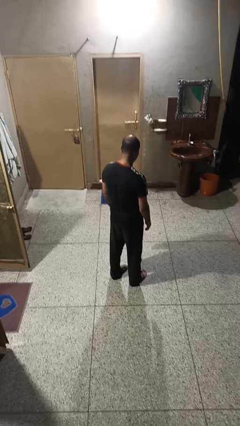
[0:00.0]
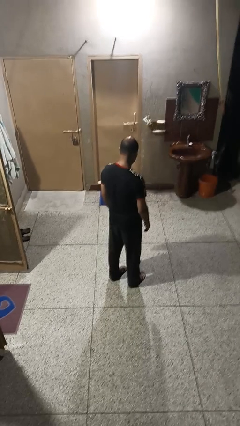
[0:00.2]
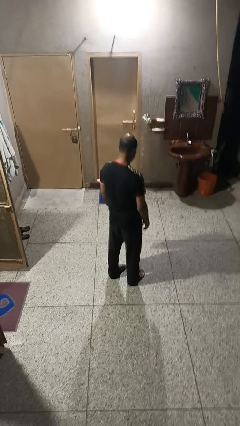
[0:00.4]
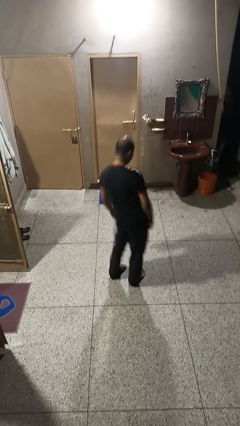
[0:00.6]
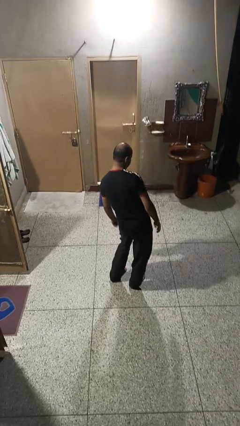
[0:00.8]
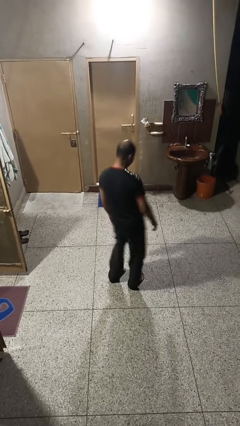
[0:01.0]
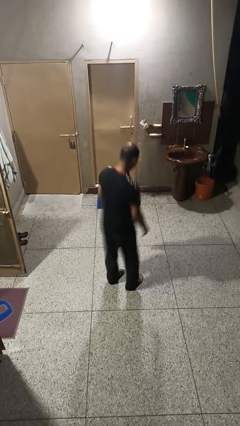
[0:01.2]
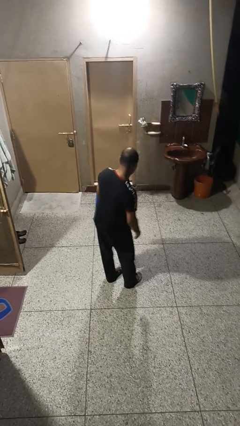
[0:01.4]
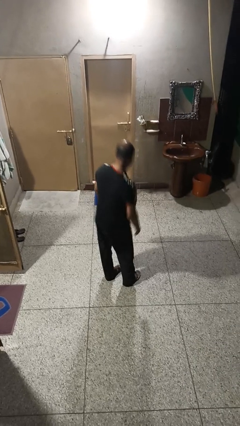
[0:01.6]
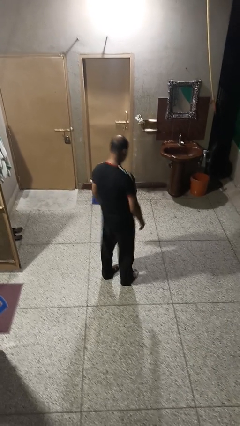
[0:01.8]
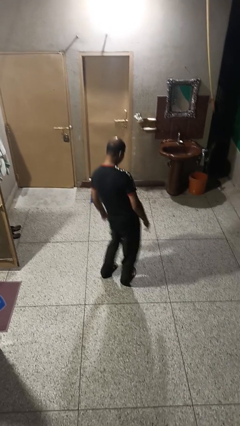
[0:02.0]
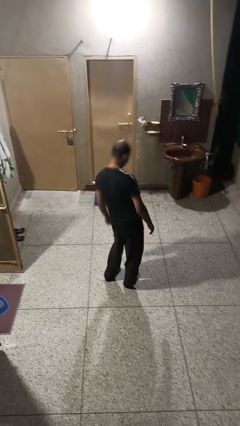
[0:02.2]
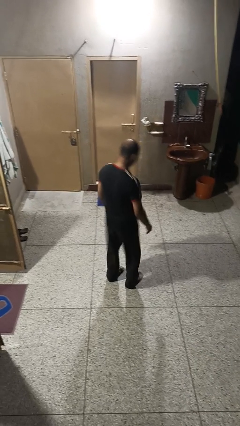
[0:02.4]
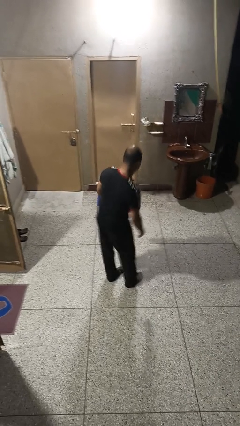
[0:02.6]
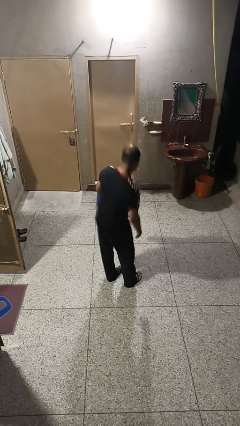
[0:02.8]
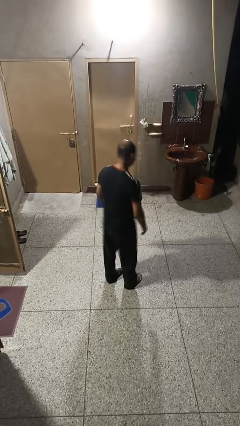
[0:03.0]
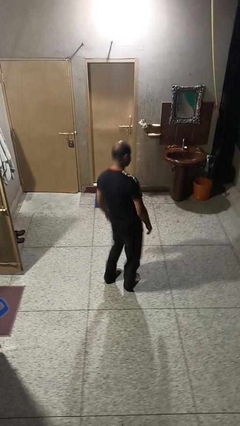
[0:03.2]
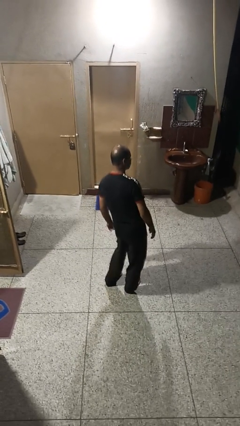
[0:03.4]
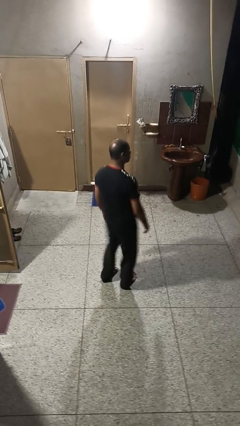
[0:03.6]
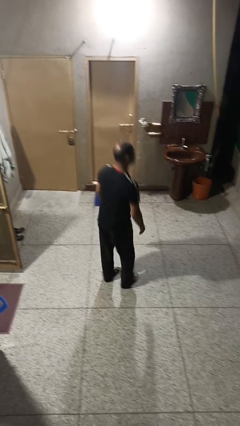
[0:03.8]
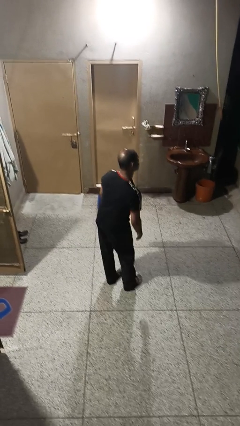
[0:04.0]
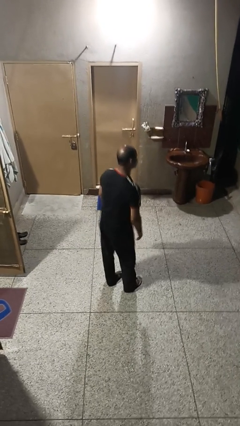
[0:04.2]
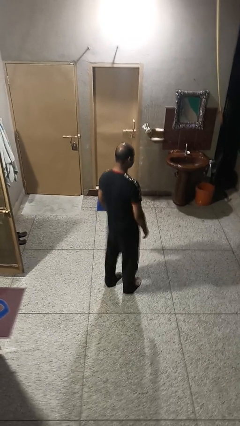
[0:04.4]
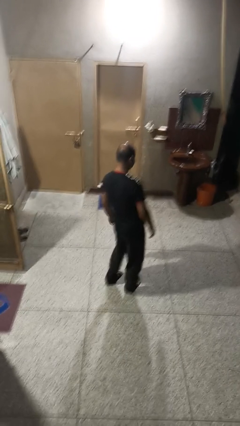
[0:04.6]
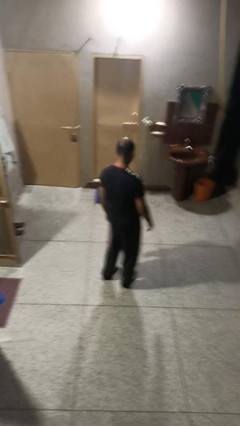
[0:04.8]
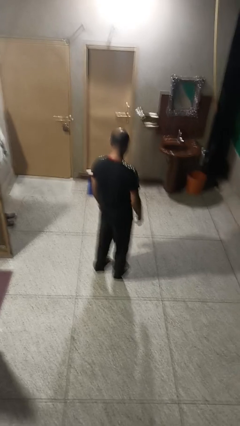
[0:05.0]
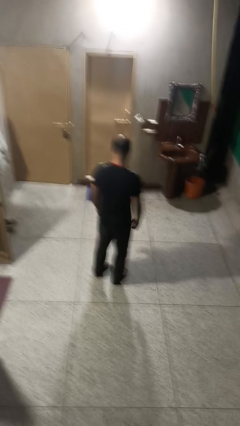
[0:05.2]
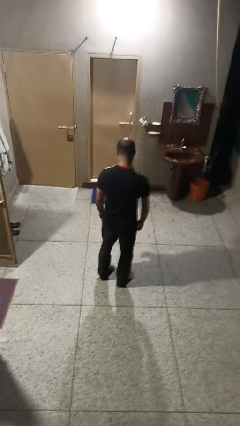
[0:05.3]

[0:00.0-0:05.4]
person wiggles hips

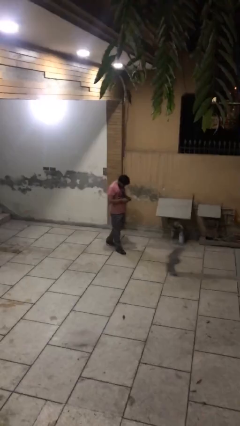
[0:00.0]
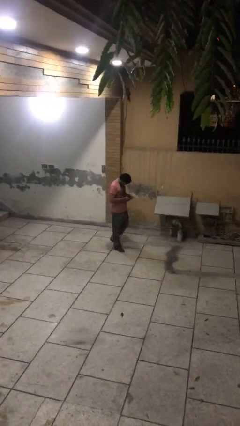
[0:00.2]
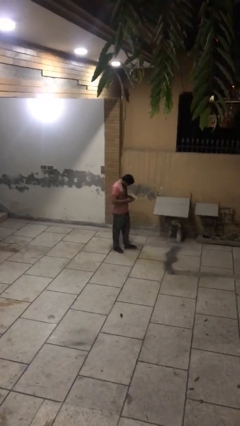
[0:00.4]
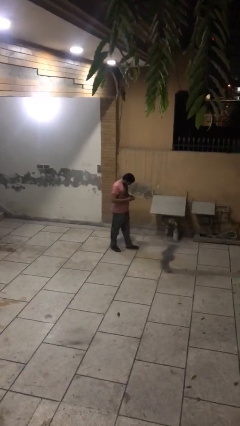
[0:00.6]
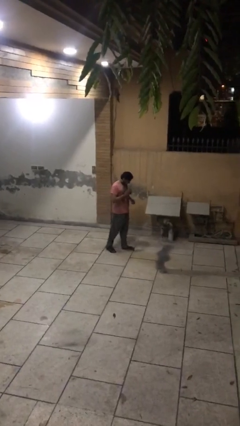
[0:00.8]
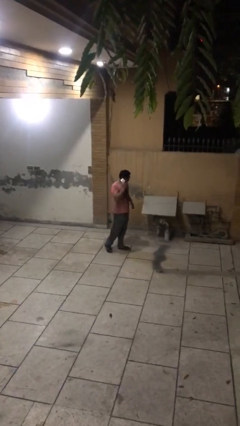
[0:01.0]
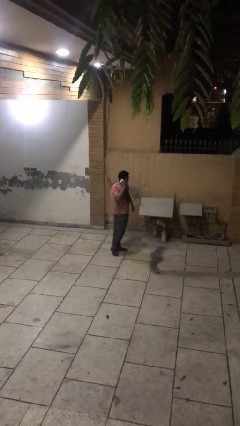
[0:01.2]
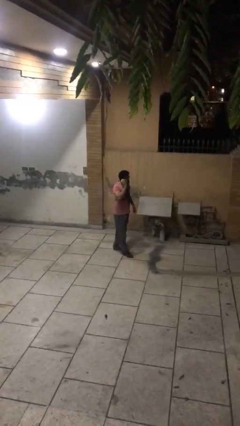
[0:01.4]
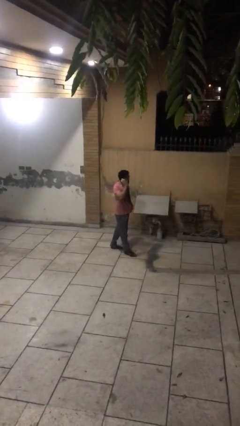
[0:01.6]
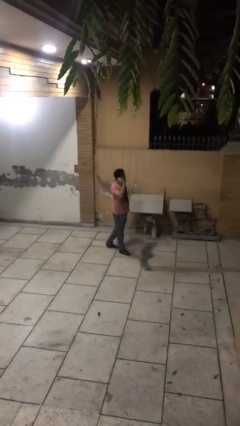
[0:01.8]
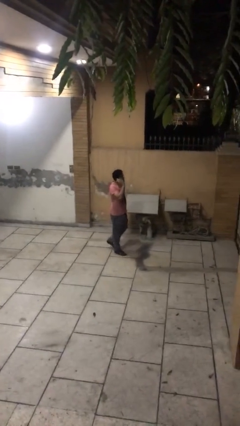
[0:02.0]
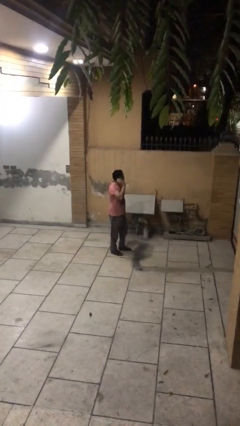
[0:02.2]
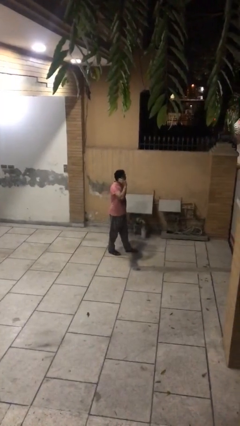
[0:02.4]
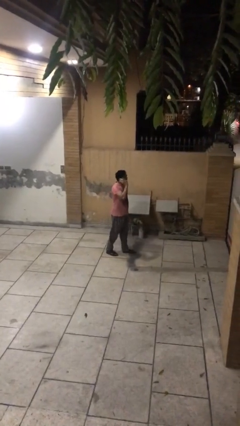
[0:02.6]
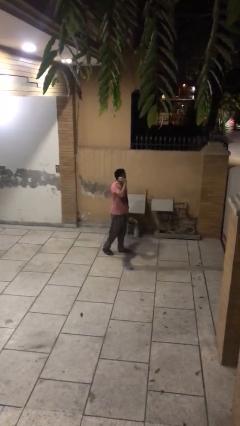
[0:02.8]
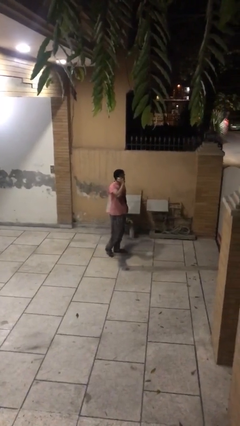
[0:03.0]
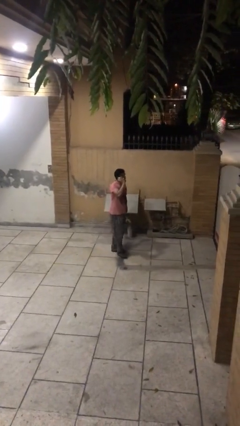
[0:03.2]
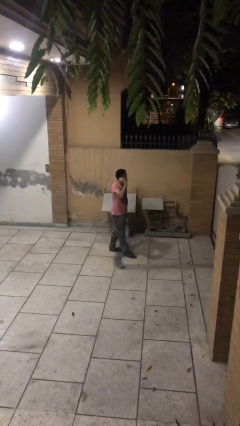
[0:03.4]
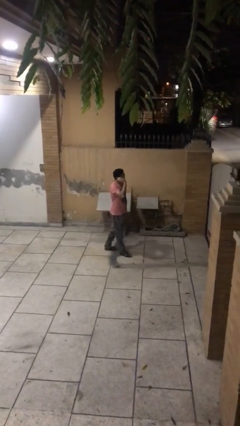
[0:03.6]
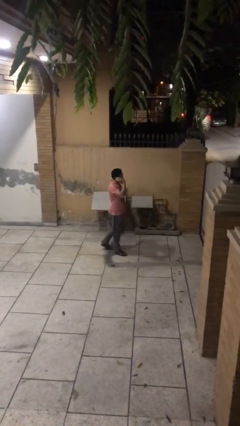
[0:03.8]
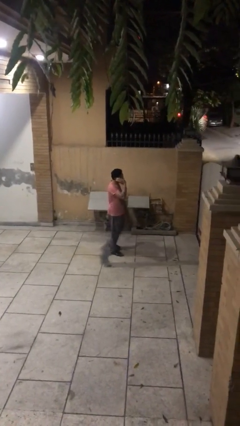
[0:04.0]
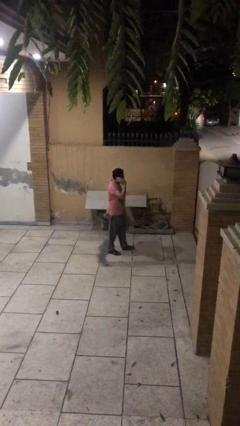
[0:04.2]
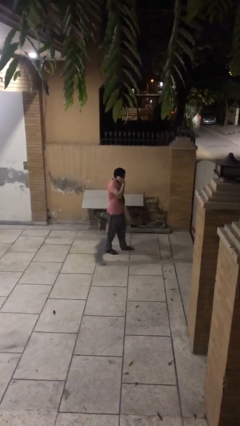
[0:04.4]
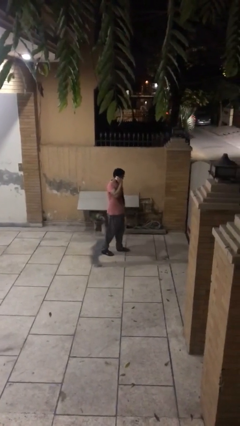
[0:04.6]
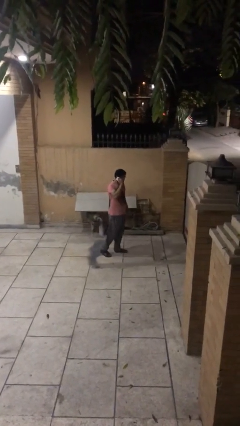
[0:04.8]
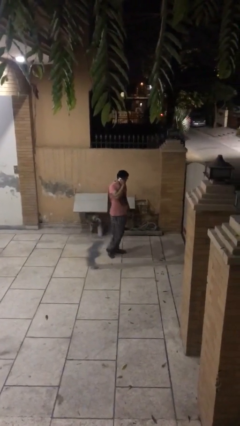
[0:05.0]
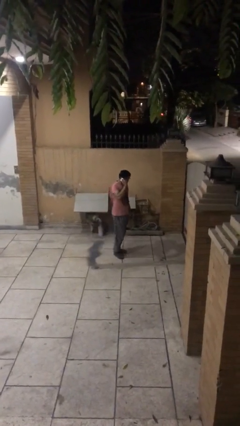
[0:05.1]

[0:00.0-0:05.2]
person talks on phone

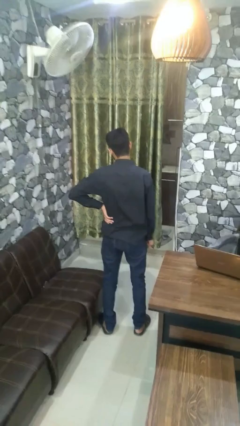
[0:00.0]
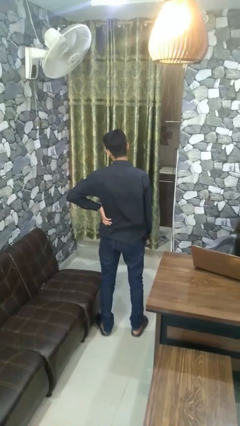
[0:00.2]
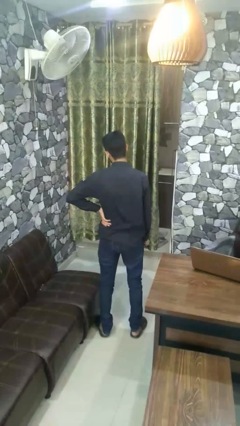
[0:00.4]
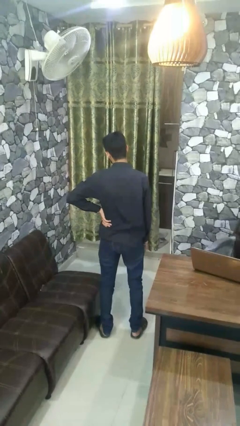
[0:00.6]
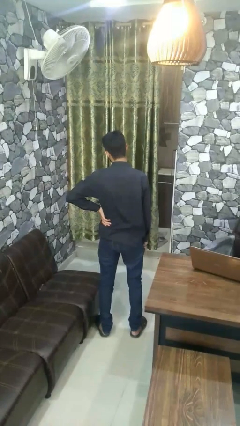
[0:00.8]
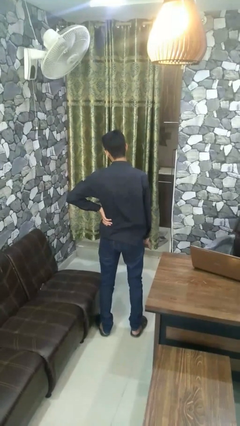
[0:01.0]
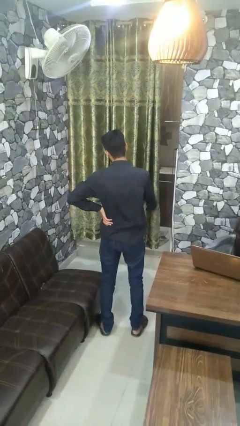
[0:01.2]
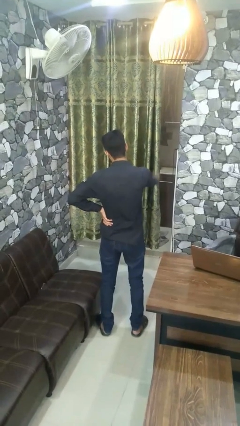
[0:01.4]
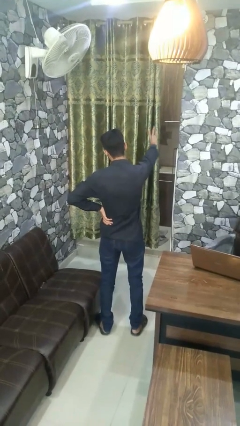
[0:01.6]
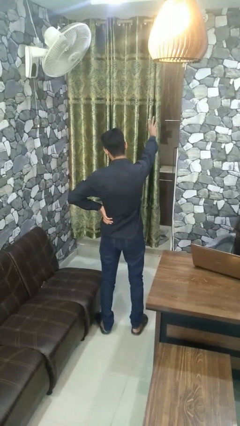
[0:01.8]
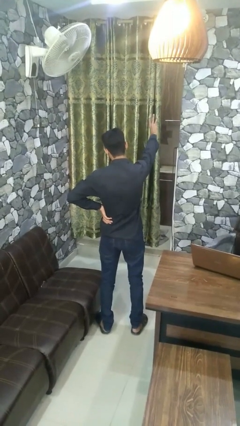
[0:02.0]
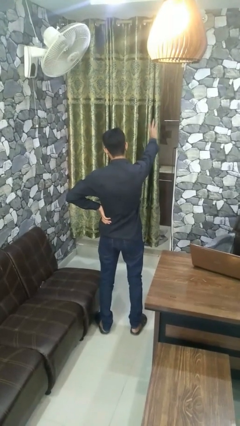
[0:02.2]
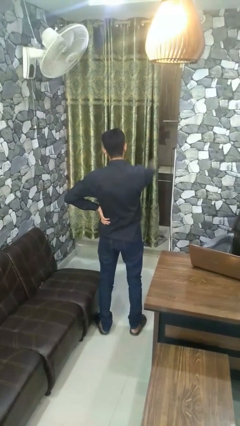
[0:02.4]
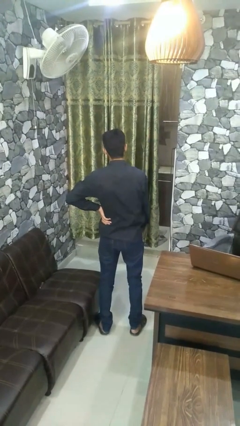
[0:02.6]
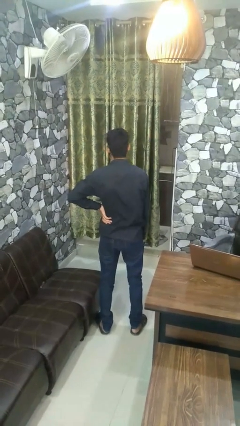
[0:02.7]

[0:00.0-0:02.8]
person gestures number three

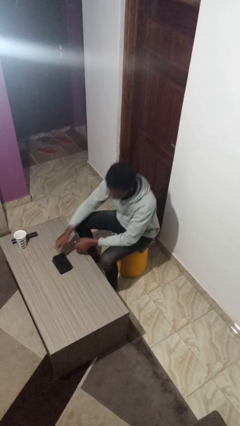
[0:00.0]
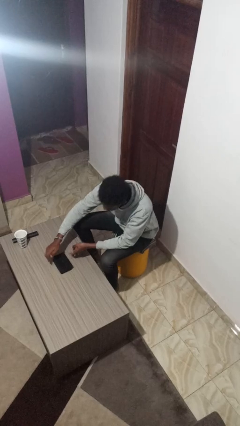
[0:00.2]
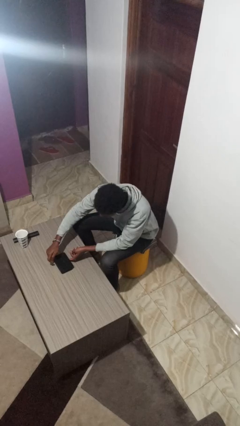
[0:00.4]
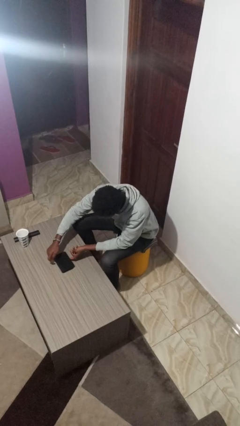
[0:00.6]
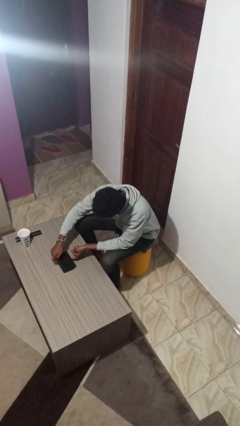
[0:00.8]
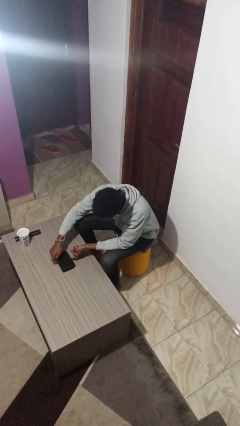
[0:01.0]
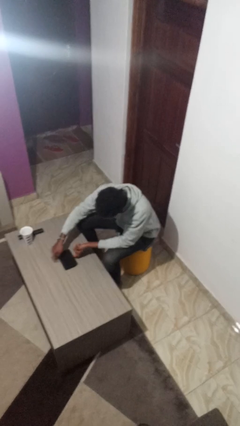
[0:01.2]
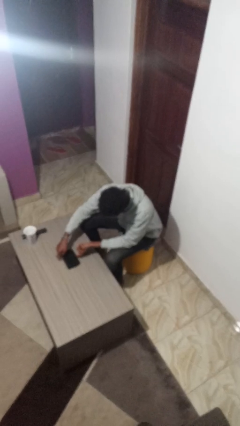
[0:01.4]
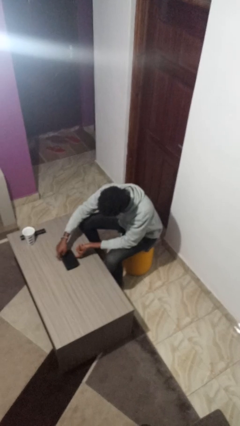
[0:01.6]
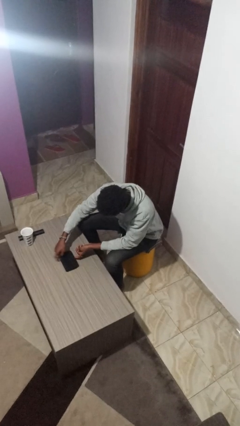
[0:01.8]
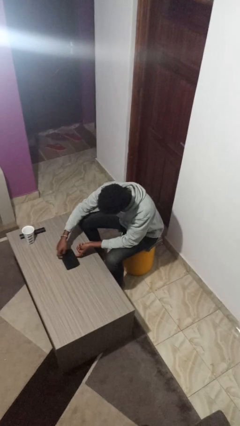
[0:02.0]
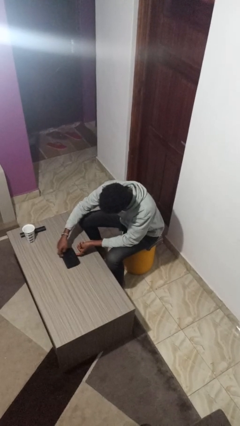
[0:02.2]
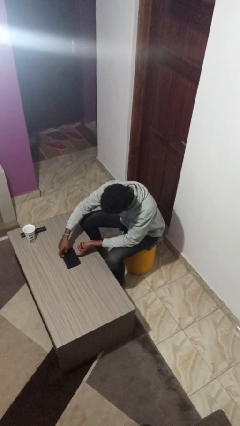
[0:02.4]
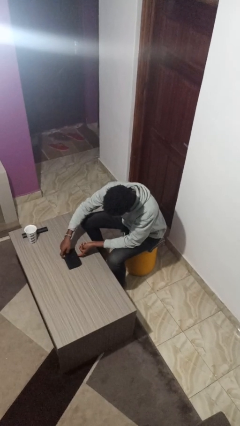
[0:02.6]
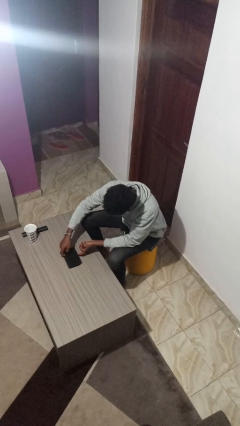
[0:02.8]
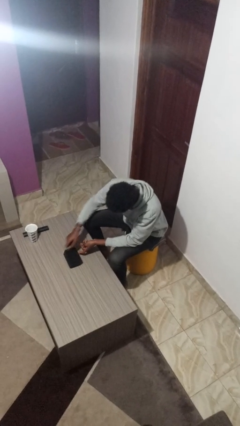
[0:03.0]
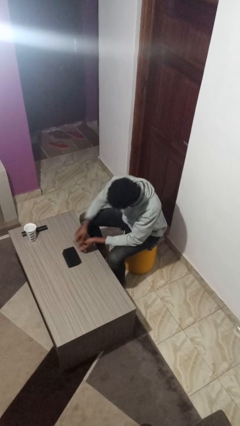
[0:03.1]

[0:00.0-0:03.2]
person taps object with finger

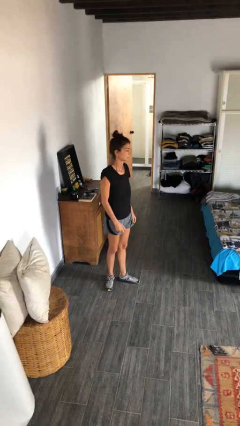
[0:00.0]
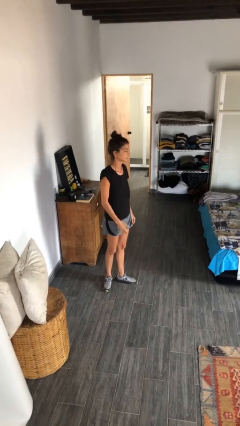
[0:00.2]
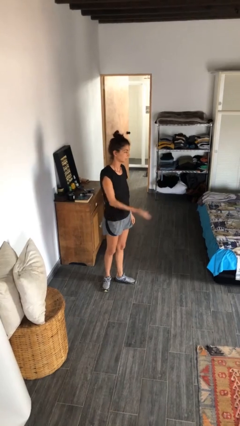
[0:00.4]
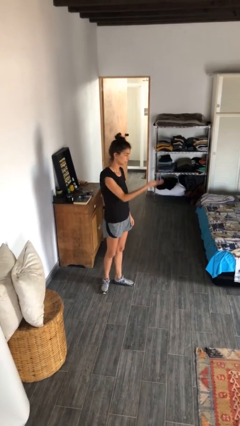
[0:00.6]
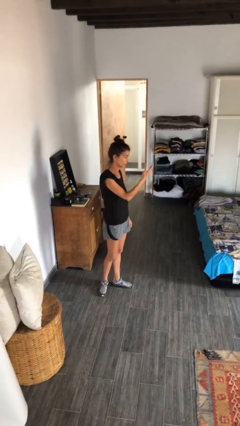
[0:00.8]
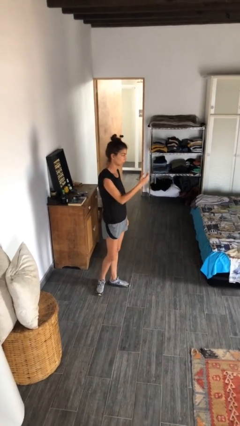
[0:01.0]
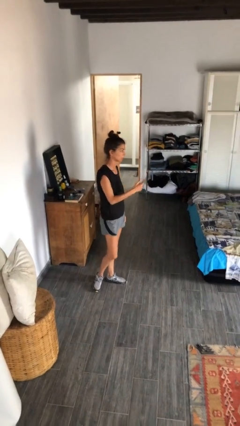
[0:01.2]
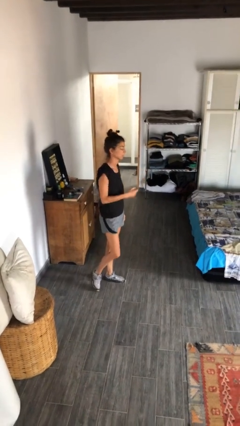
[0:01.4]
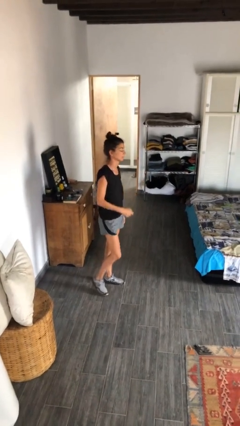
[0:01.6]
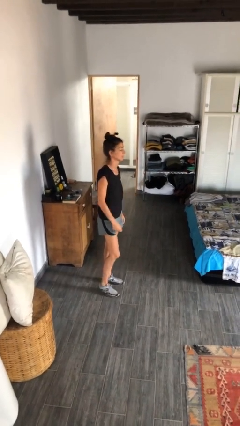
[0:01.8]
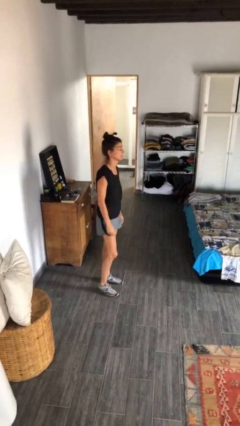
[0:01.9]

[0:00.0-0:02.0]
person gestures swipe up
